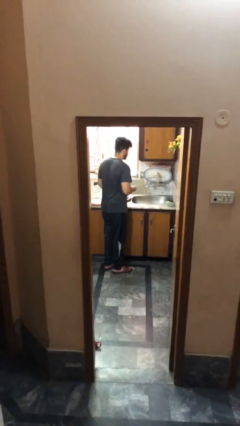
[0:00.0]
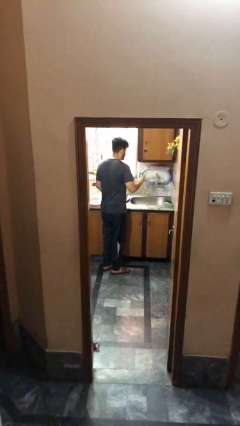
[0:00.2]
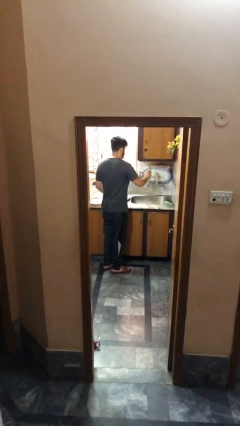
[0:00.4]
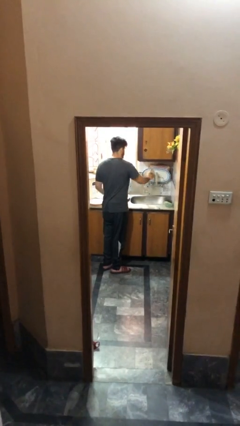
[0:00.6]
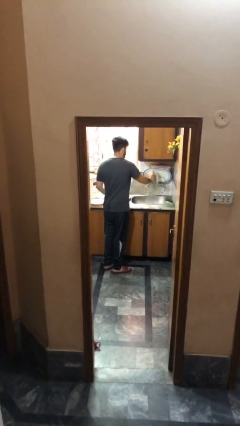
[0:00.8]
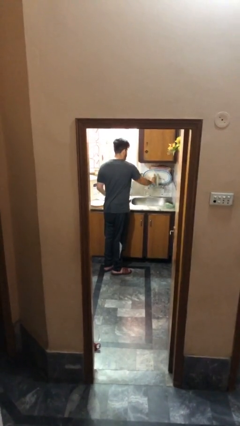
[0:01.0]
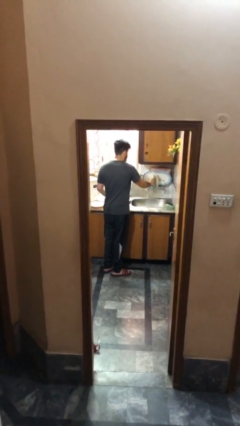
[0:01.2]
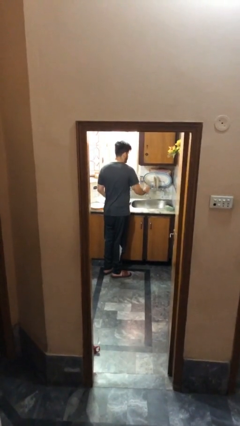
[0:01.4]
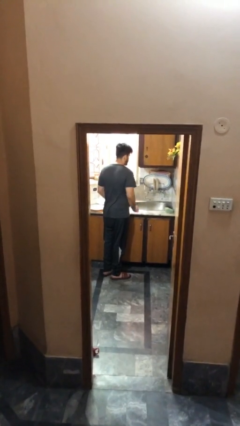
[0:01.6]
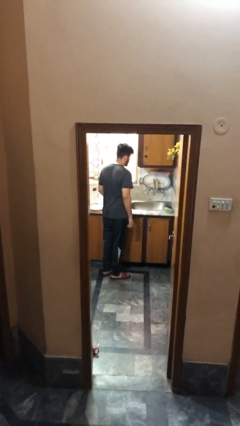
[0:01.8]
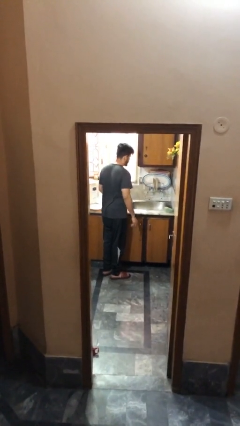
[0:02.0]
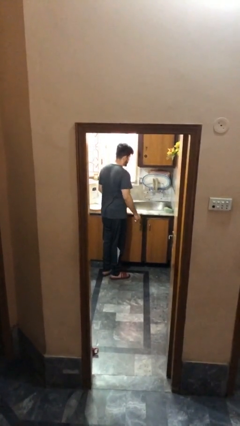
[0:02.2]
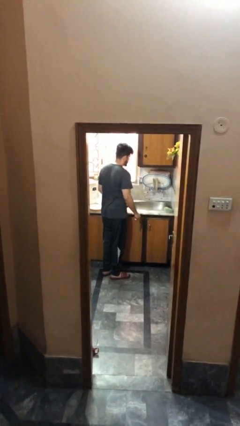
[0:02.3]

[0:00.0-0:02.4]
person loads dishwasher

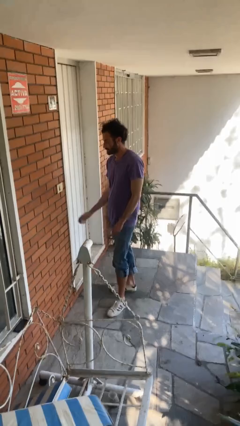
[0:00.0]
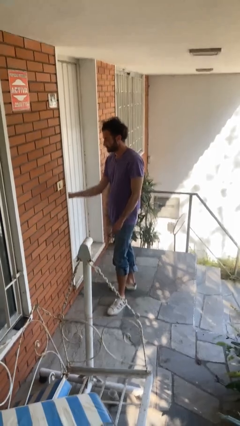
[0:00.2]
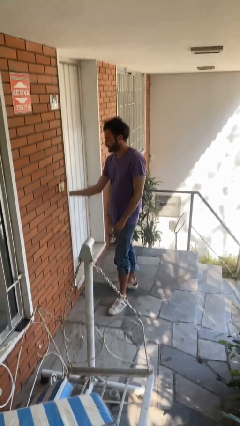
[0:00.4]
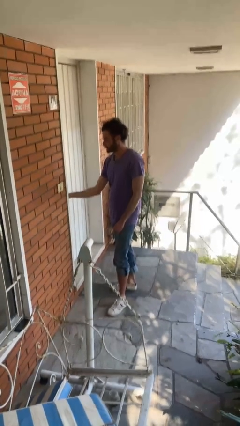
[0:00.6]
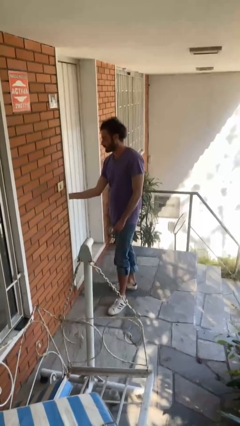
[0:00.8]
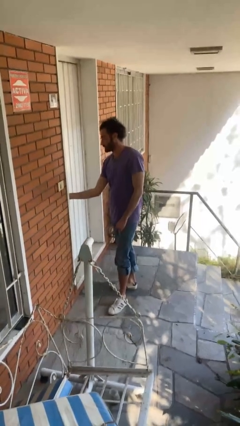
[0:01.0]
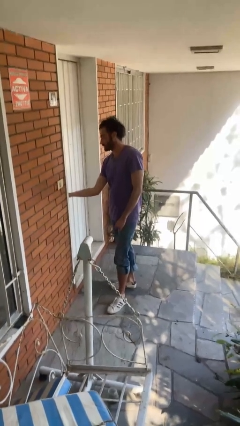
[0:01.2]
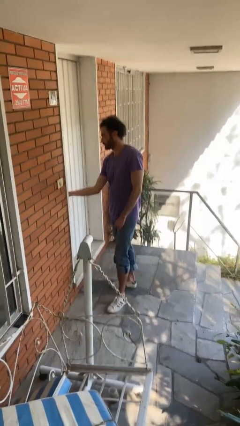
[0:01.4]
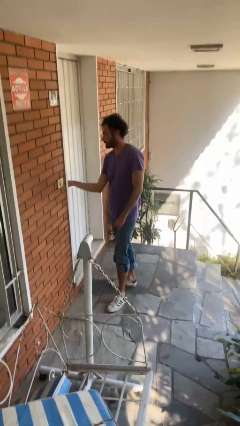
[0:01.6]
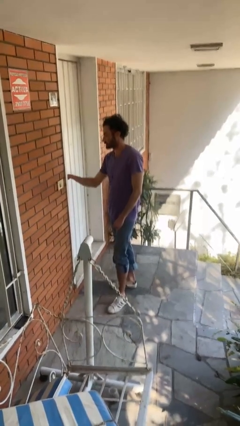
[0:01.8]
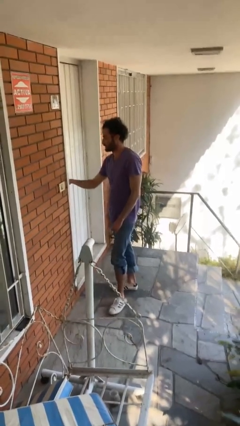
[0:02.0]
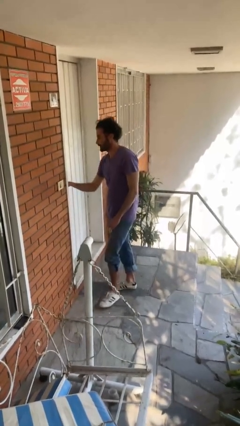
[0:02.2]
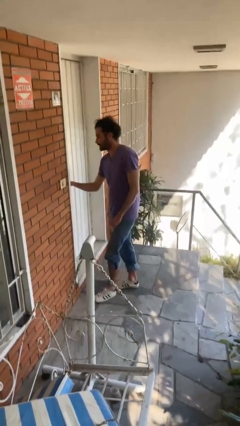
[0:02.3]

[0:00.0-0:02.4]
person unlocks door with keys

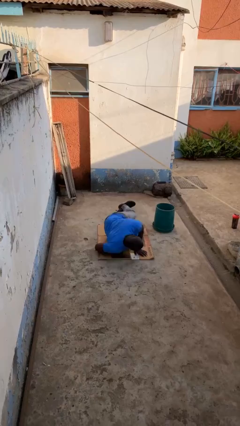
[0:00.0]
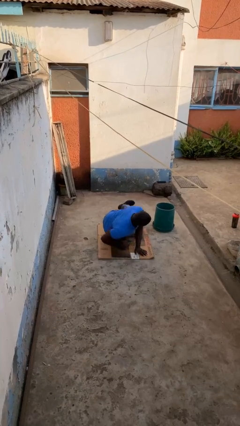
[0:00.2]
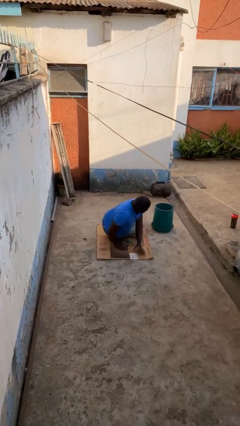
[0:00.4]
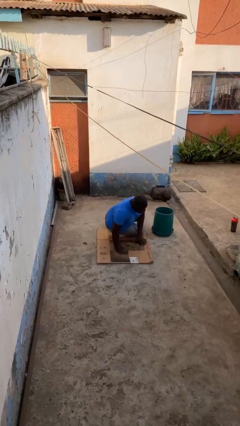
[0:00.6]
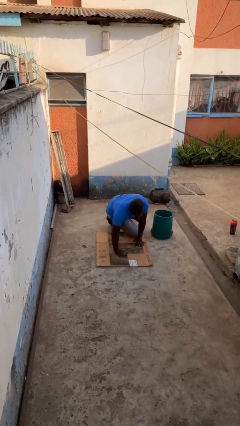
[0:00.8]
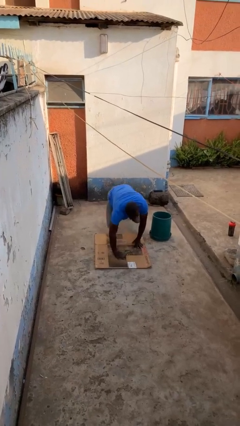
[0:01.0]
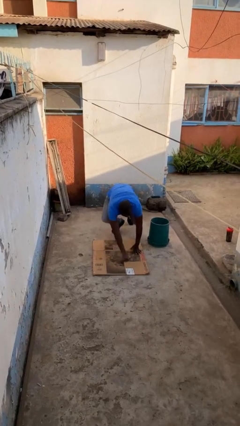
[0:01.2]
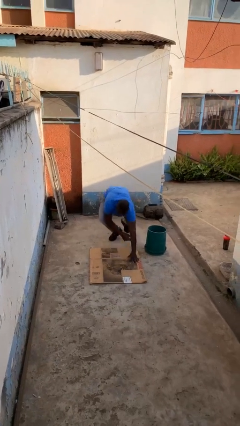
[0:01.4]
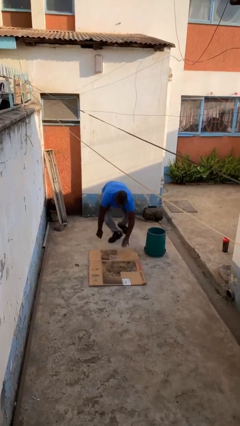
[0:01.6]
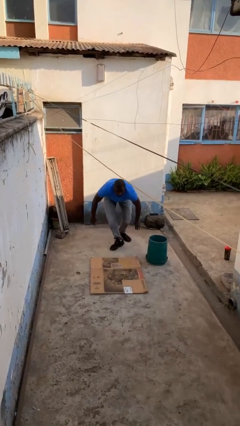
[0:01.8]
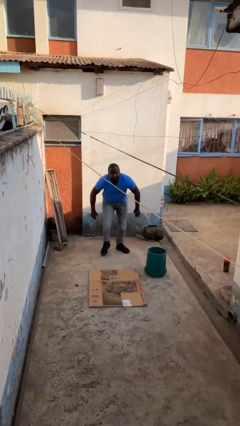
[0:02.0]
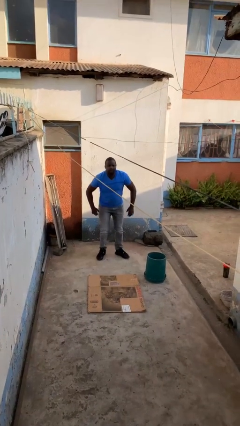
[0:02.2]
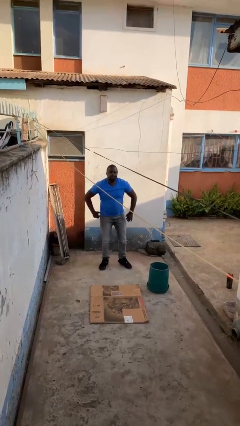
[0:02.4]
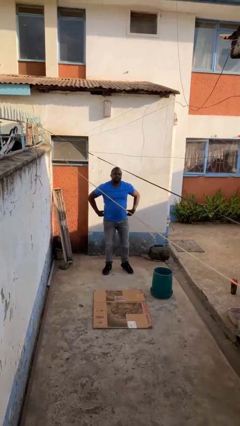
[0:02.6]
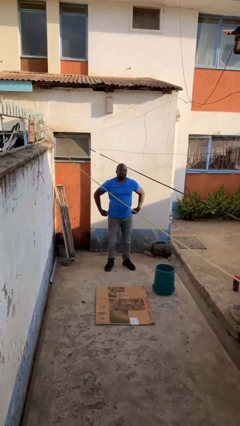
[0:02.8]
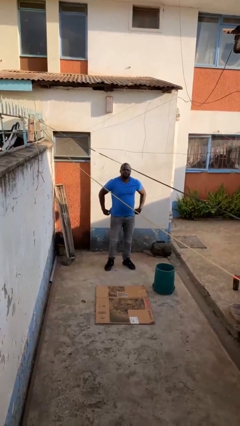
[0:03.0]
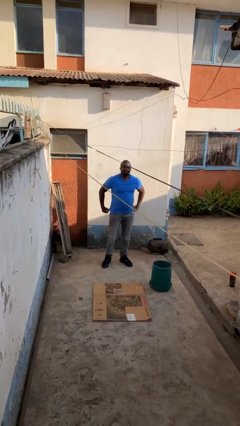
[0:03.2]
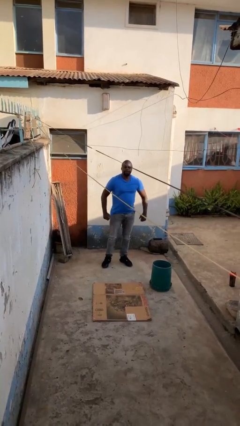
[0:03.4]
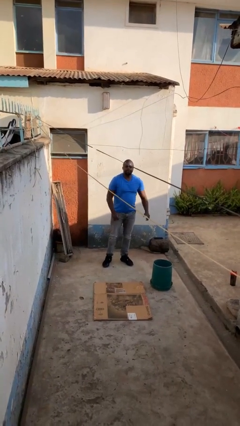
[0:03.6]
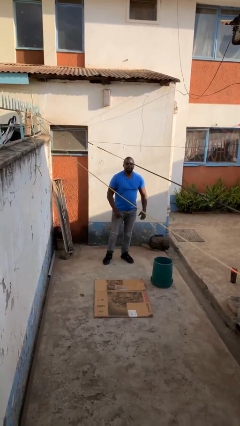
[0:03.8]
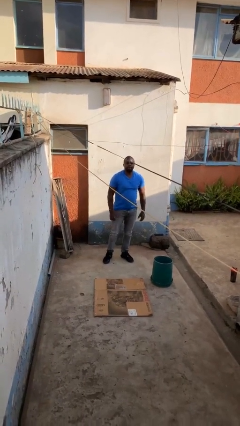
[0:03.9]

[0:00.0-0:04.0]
person stands up from floor

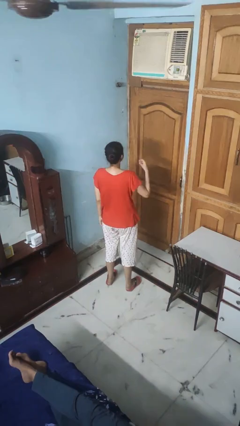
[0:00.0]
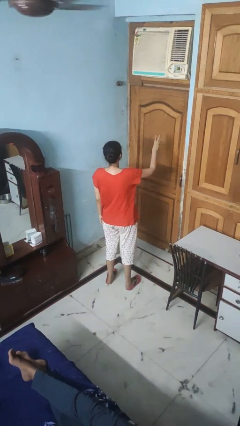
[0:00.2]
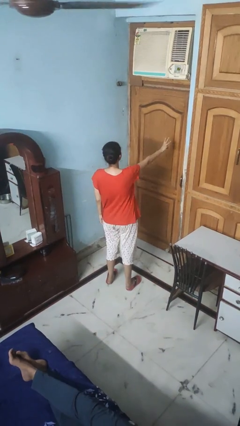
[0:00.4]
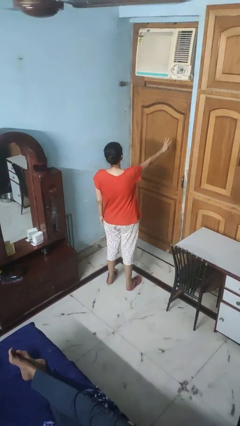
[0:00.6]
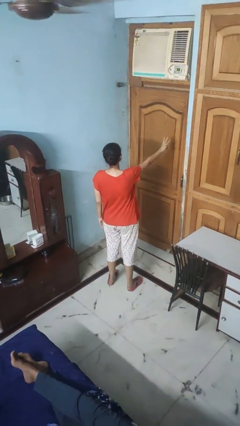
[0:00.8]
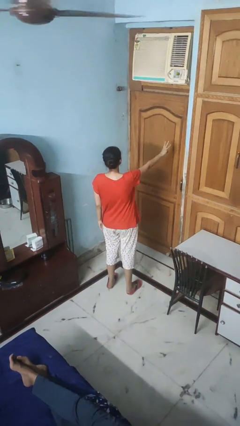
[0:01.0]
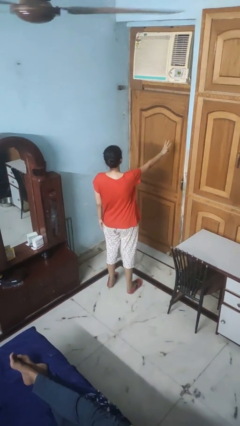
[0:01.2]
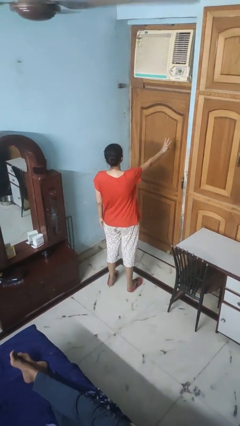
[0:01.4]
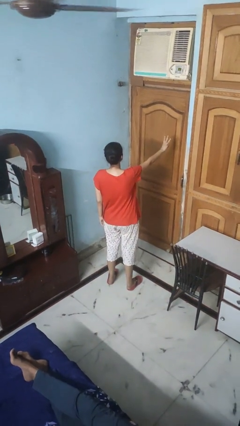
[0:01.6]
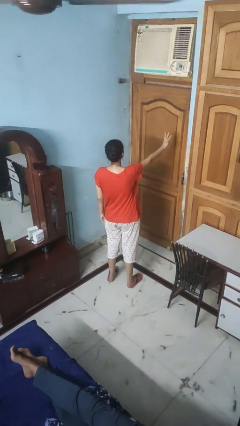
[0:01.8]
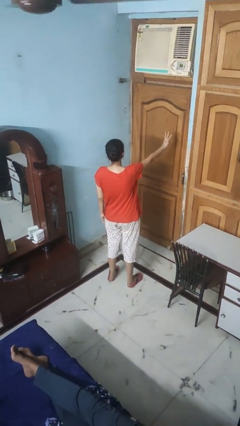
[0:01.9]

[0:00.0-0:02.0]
person gestures number three

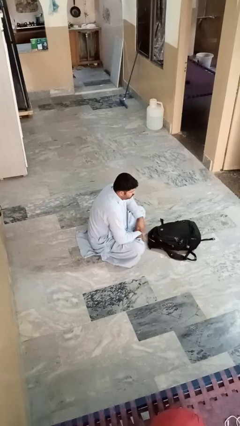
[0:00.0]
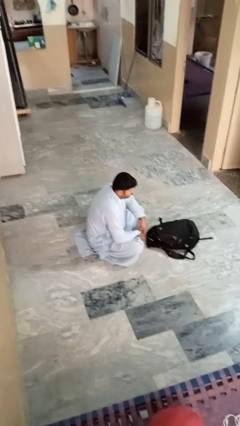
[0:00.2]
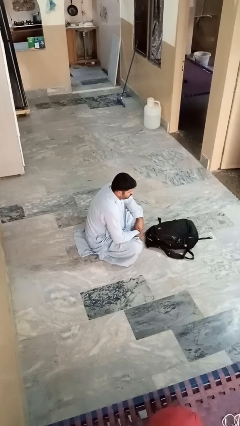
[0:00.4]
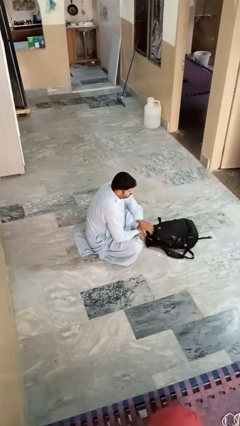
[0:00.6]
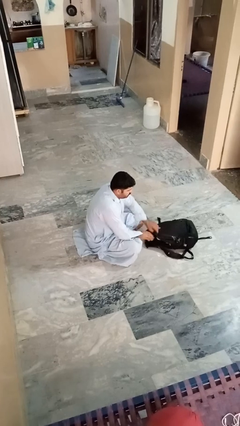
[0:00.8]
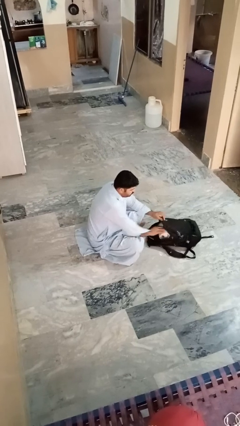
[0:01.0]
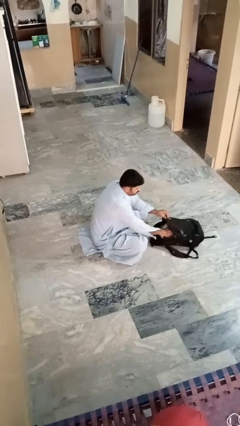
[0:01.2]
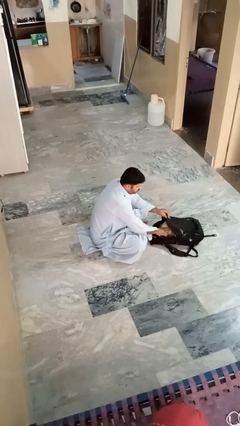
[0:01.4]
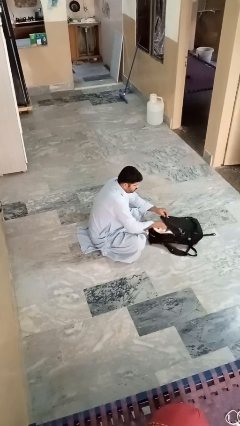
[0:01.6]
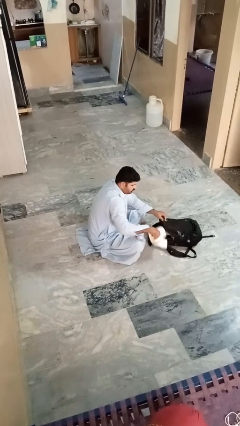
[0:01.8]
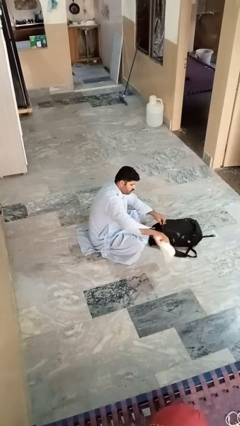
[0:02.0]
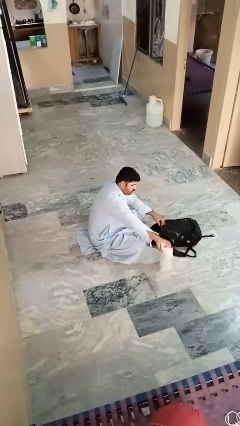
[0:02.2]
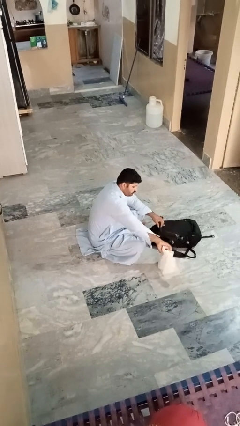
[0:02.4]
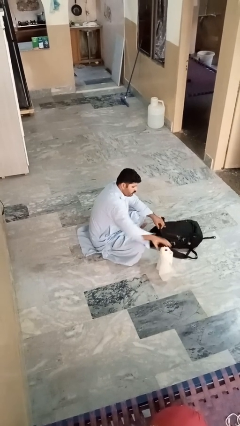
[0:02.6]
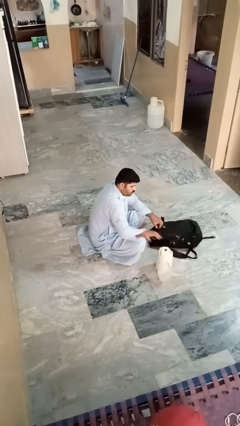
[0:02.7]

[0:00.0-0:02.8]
person takes object from bag

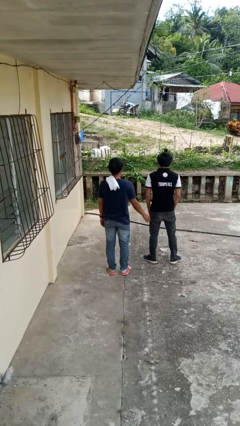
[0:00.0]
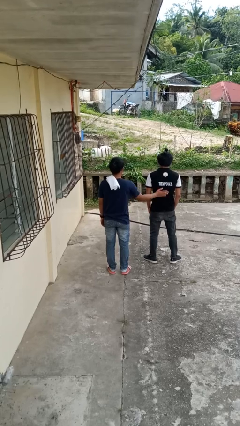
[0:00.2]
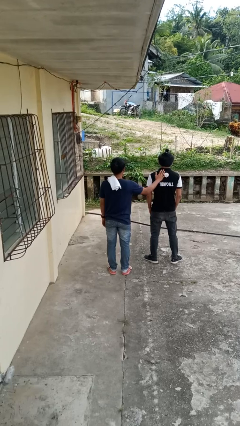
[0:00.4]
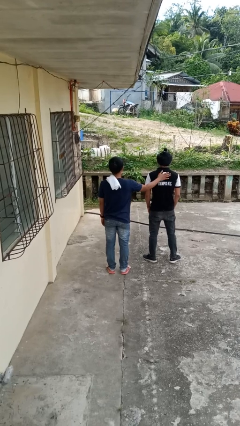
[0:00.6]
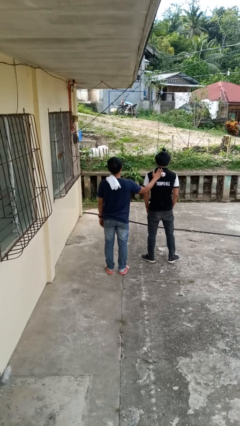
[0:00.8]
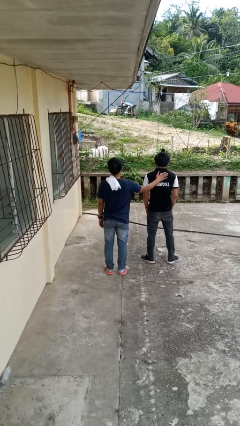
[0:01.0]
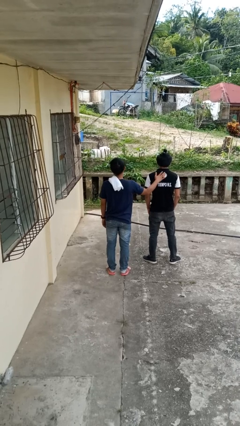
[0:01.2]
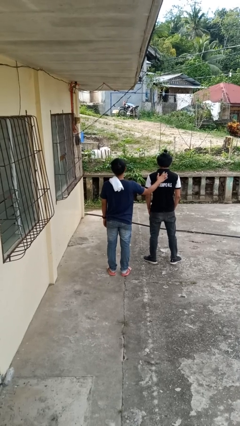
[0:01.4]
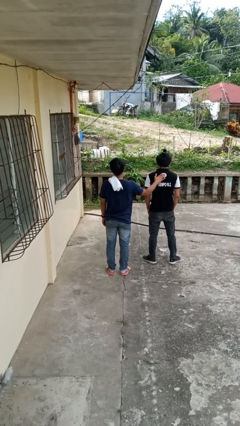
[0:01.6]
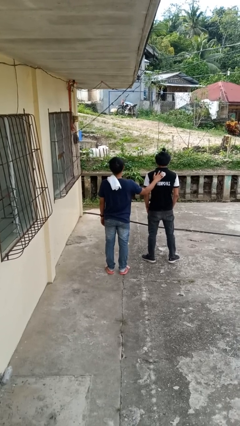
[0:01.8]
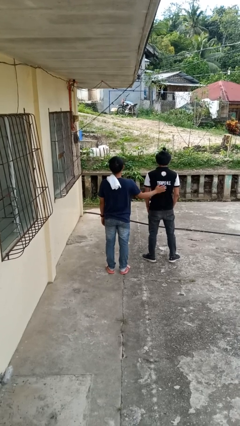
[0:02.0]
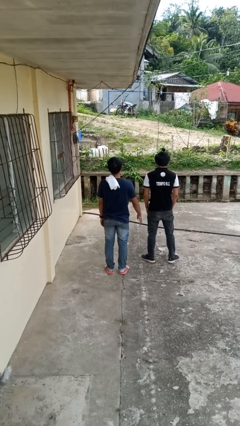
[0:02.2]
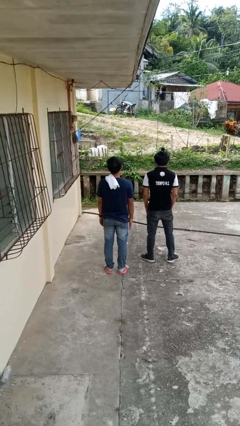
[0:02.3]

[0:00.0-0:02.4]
person touches back of person

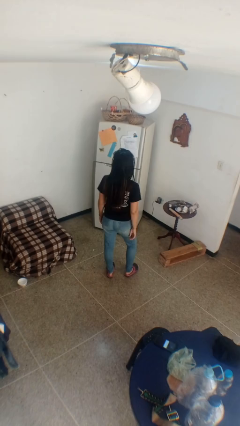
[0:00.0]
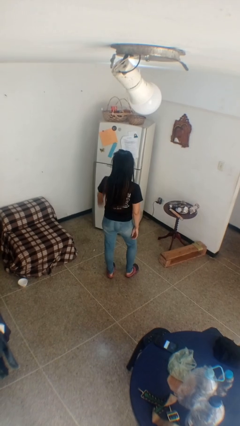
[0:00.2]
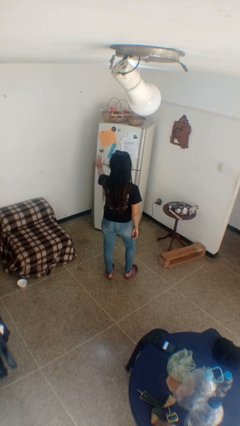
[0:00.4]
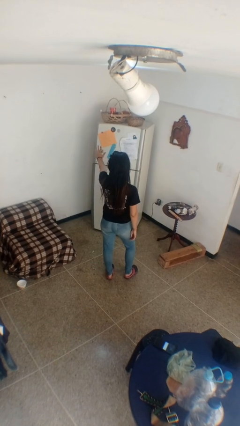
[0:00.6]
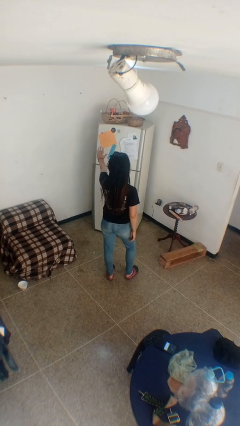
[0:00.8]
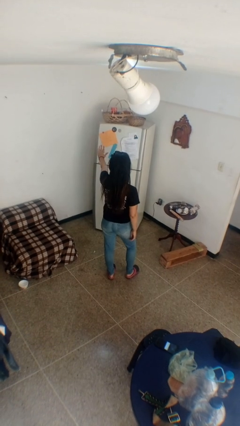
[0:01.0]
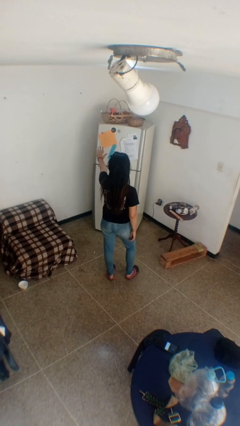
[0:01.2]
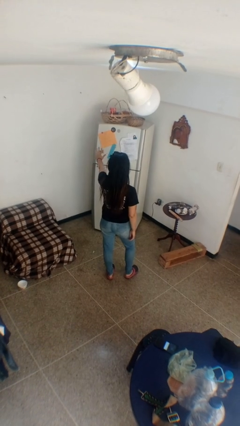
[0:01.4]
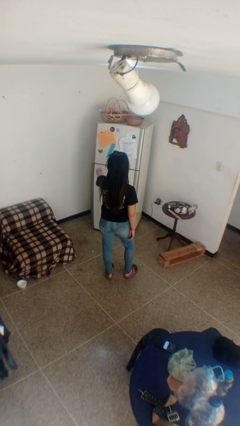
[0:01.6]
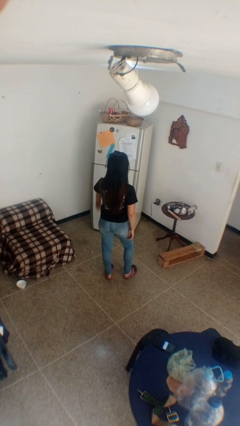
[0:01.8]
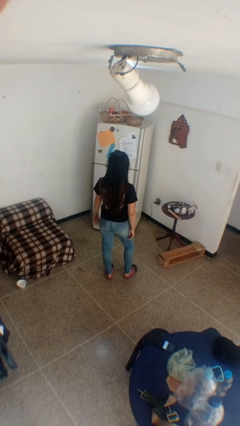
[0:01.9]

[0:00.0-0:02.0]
person gestures stop
